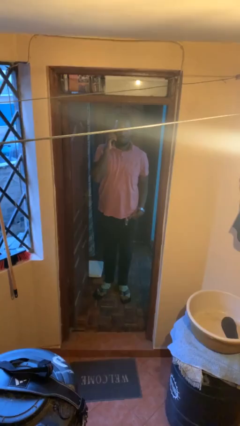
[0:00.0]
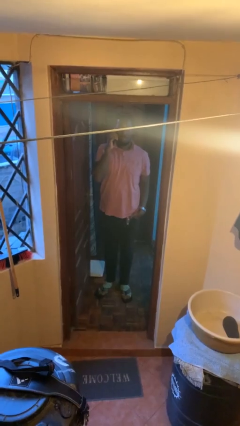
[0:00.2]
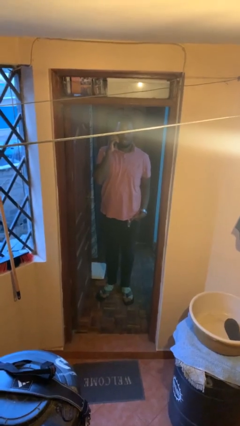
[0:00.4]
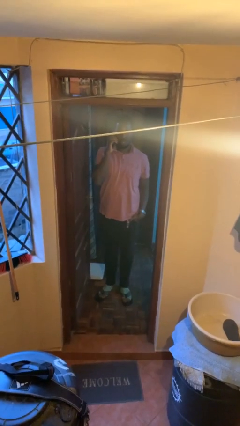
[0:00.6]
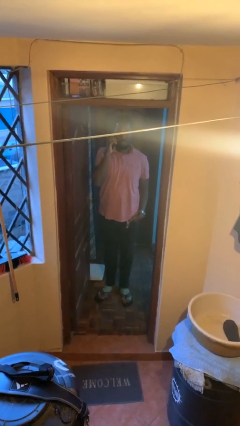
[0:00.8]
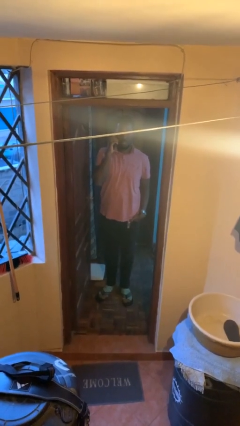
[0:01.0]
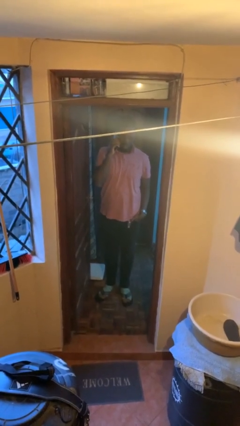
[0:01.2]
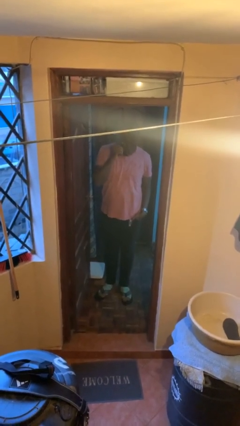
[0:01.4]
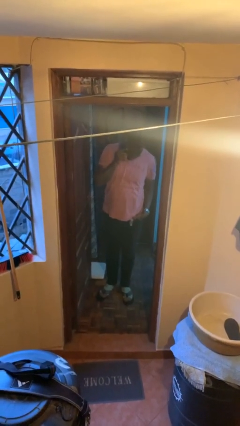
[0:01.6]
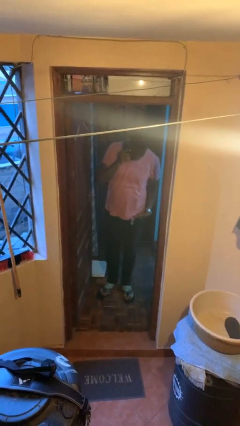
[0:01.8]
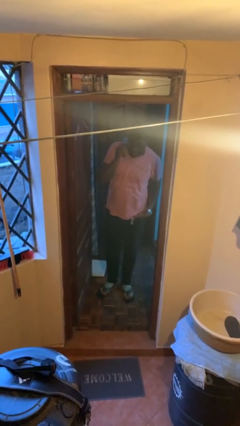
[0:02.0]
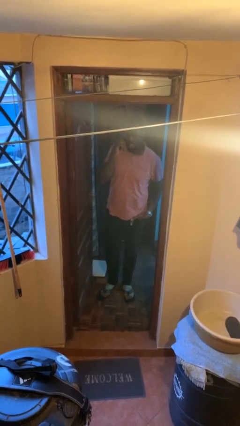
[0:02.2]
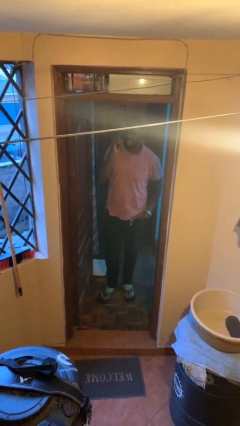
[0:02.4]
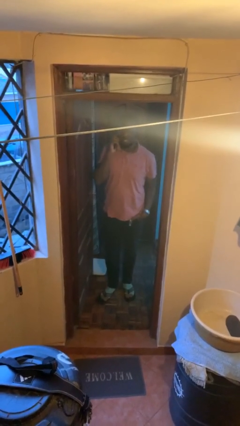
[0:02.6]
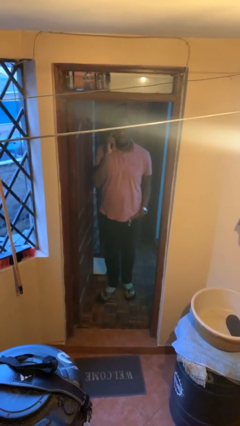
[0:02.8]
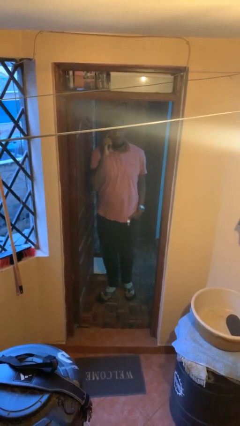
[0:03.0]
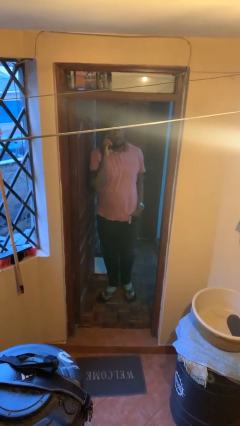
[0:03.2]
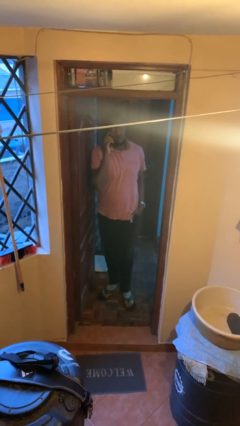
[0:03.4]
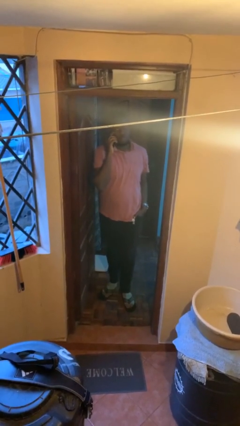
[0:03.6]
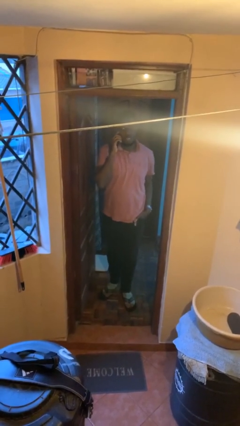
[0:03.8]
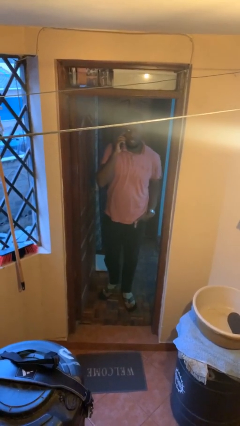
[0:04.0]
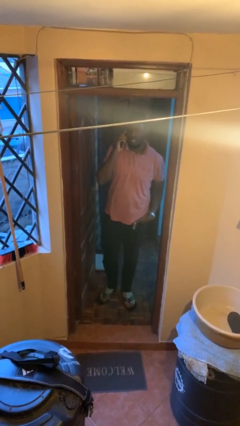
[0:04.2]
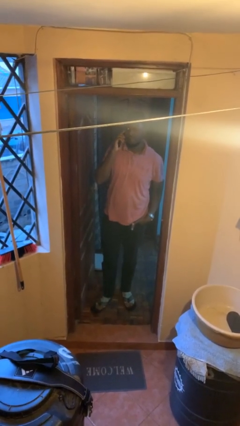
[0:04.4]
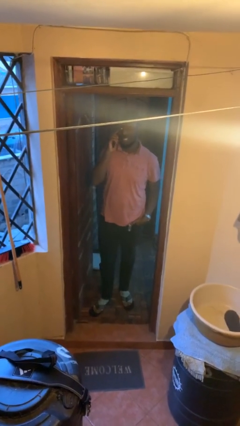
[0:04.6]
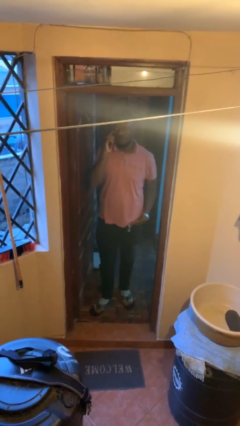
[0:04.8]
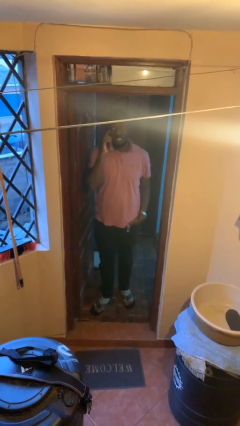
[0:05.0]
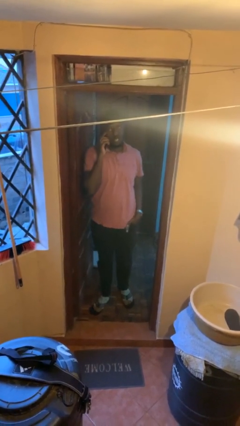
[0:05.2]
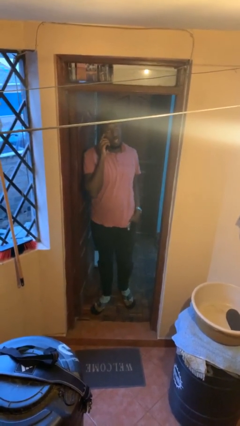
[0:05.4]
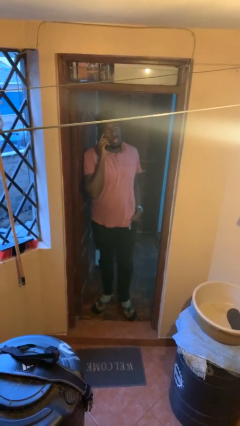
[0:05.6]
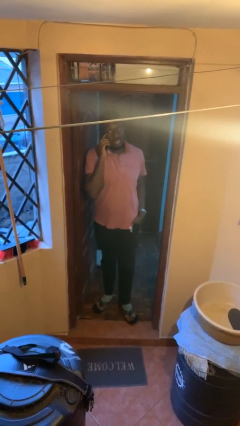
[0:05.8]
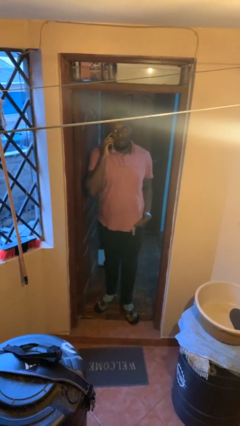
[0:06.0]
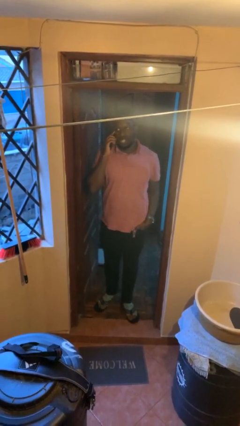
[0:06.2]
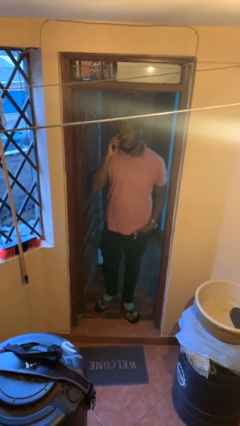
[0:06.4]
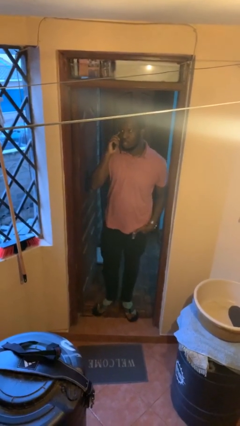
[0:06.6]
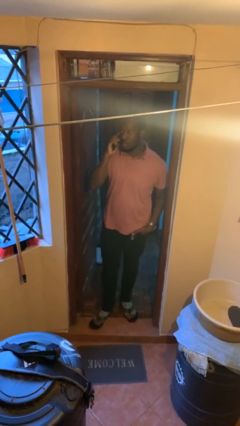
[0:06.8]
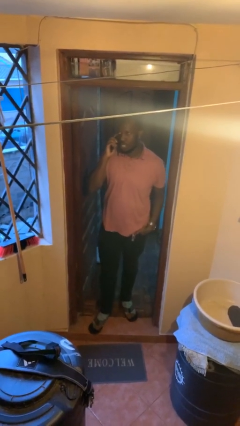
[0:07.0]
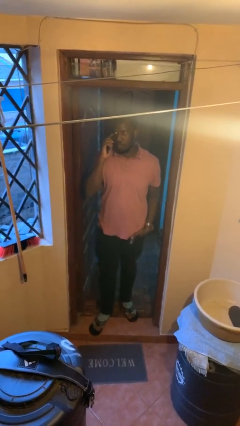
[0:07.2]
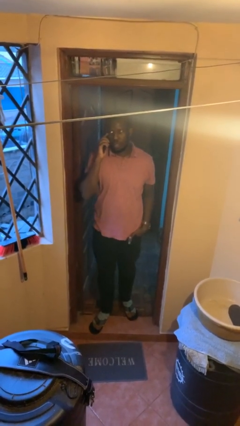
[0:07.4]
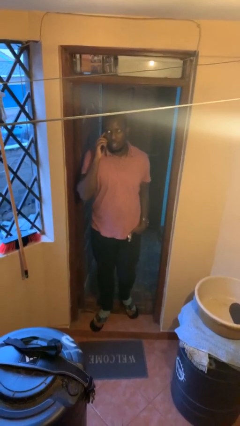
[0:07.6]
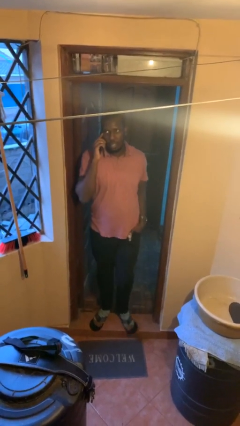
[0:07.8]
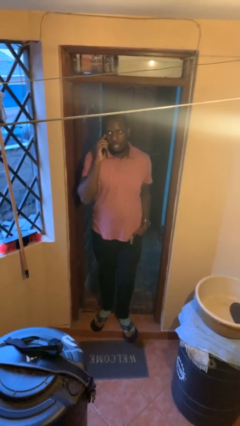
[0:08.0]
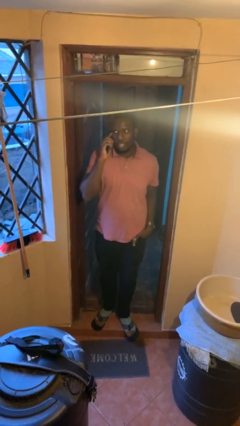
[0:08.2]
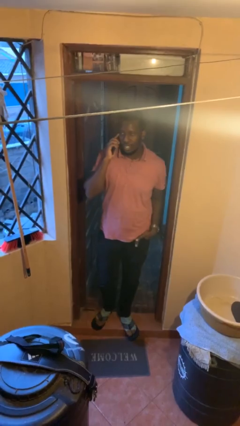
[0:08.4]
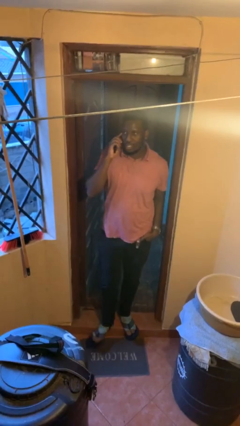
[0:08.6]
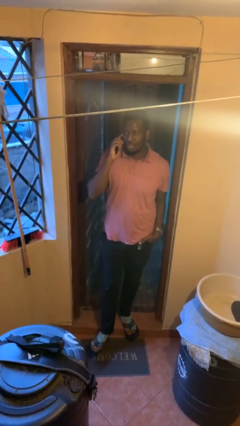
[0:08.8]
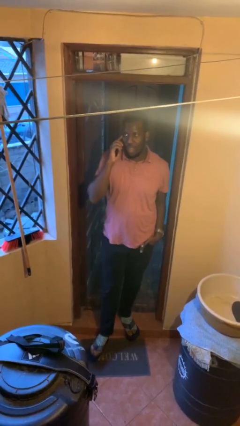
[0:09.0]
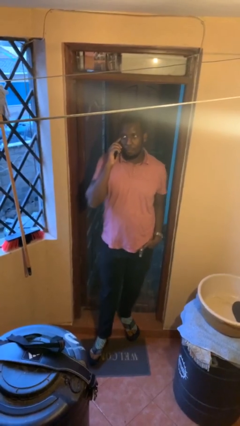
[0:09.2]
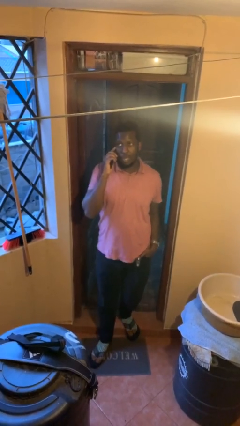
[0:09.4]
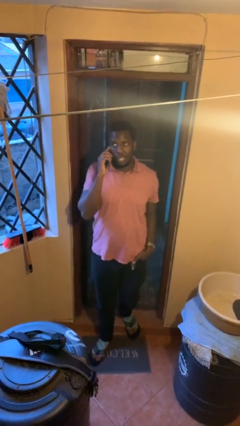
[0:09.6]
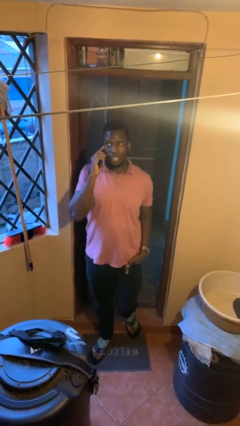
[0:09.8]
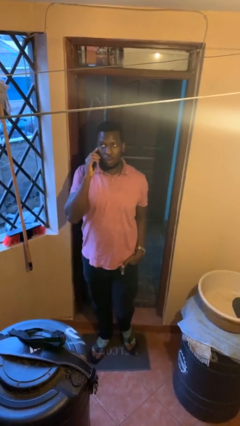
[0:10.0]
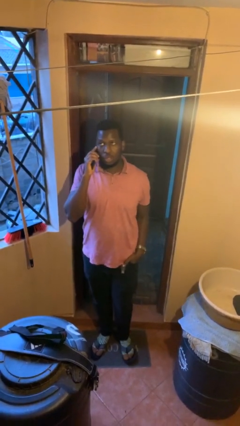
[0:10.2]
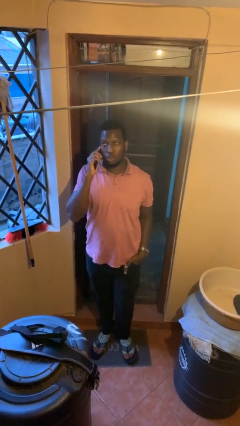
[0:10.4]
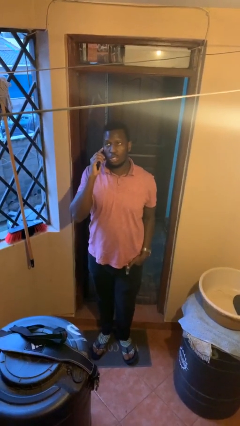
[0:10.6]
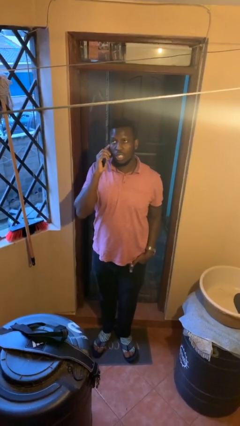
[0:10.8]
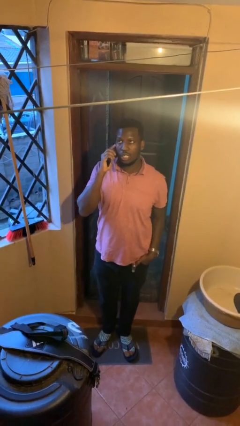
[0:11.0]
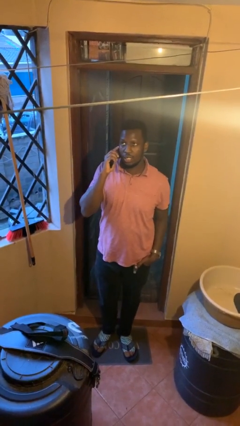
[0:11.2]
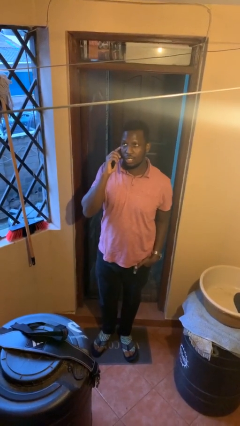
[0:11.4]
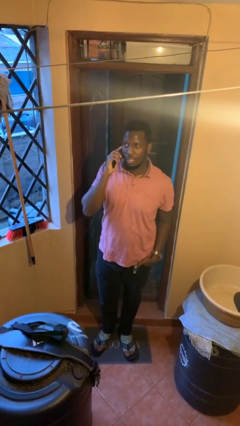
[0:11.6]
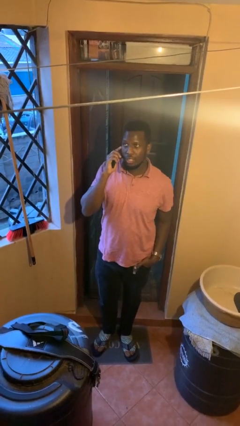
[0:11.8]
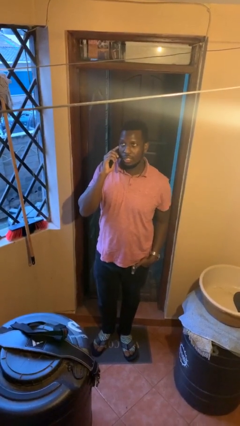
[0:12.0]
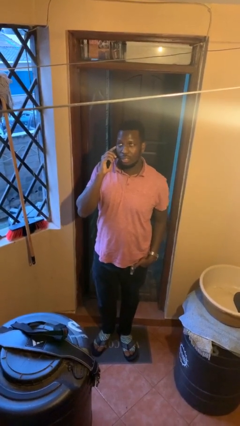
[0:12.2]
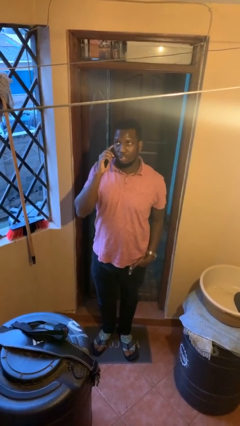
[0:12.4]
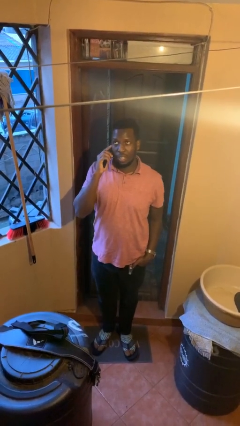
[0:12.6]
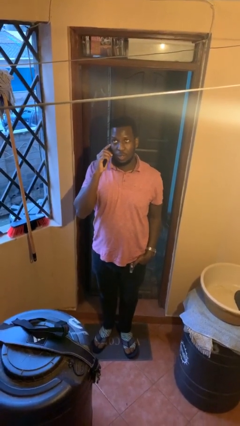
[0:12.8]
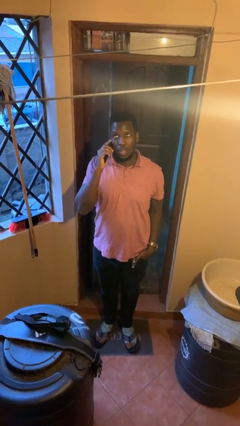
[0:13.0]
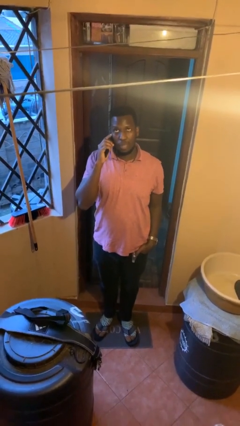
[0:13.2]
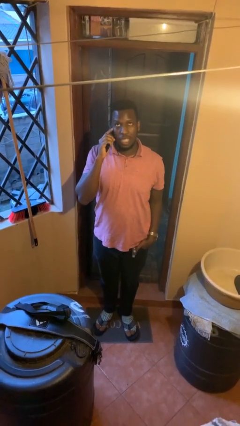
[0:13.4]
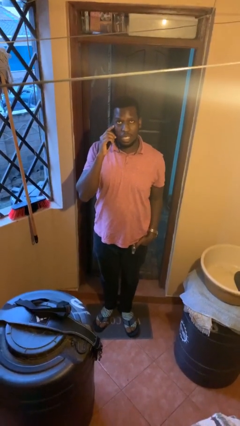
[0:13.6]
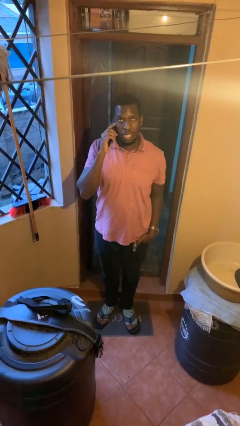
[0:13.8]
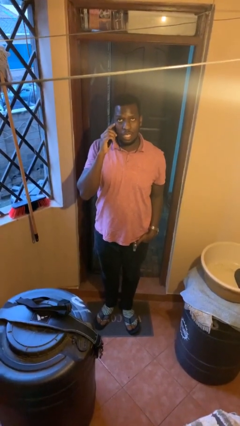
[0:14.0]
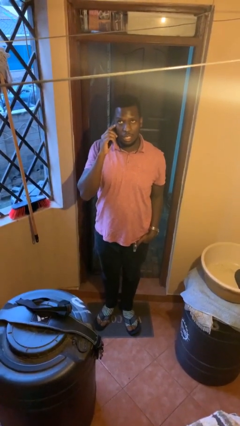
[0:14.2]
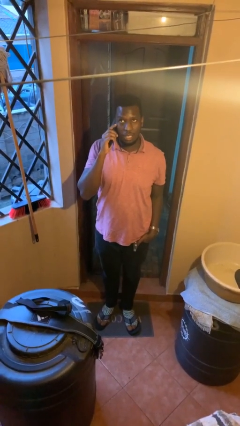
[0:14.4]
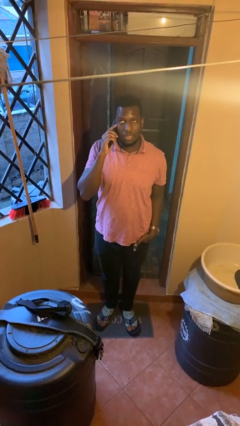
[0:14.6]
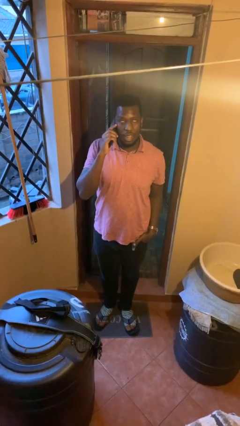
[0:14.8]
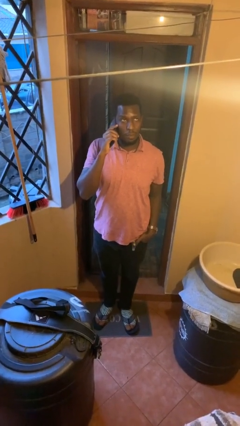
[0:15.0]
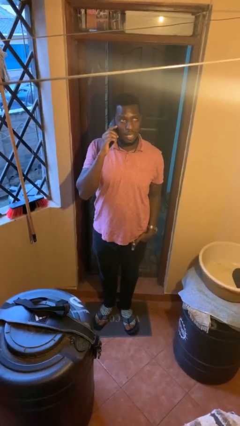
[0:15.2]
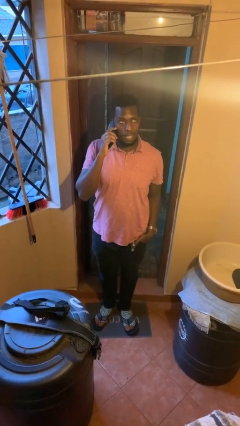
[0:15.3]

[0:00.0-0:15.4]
person enters scene through structure

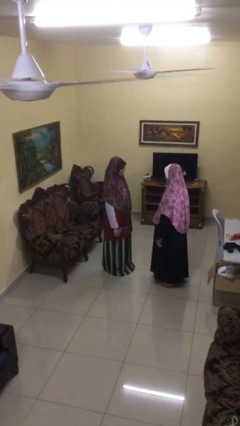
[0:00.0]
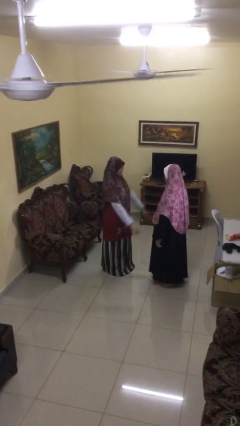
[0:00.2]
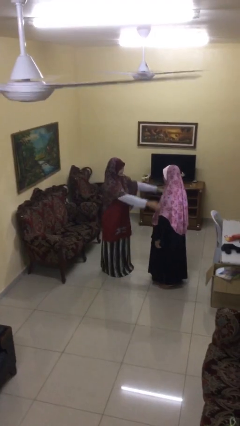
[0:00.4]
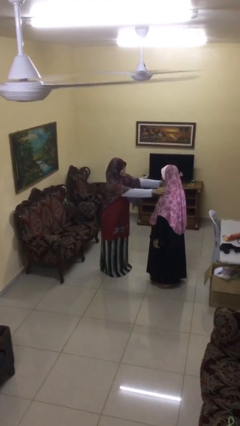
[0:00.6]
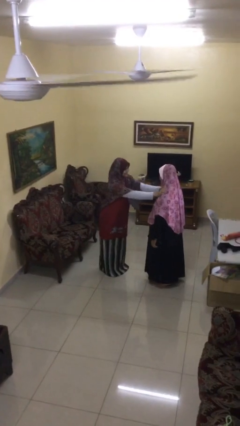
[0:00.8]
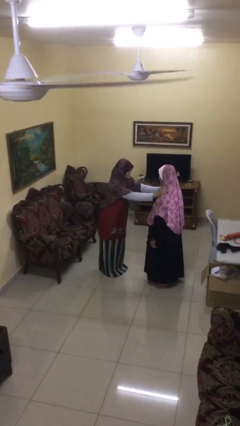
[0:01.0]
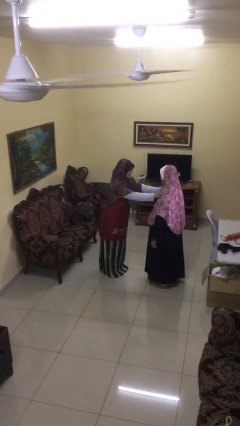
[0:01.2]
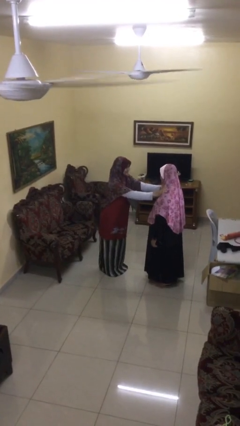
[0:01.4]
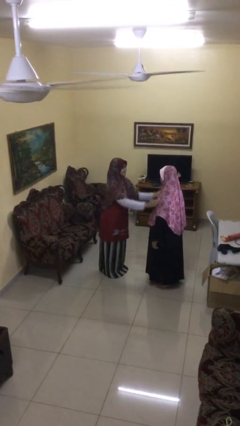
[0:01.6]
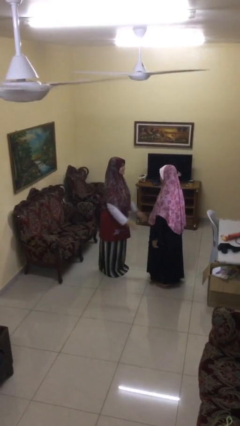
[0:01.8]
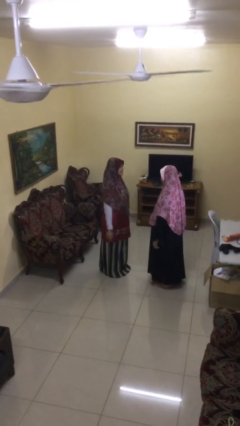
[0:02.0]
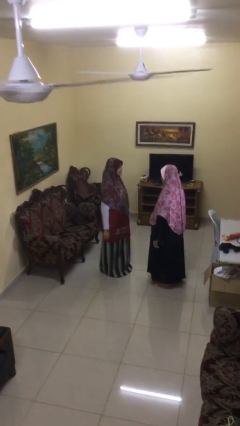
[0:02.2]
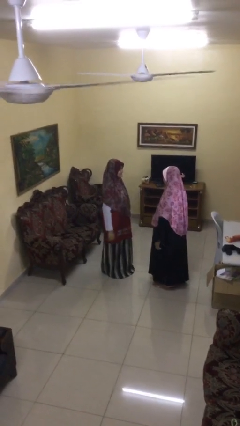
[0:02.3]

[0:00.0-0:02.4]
person pounds shoulders of person

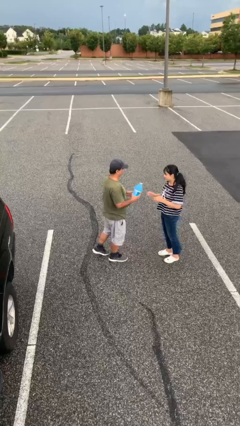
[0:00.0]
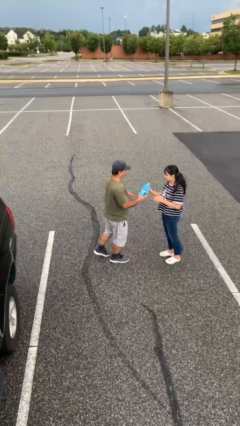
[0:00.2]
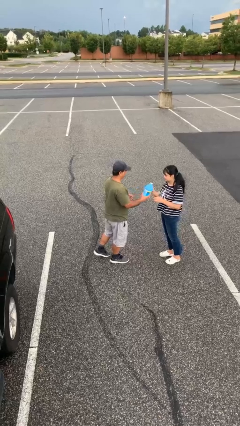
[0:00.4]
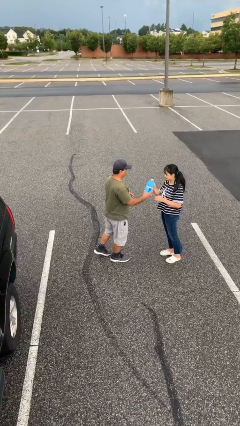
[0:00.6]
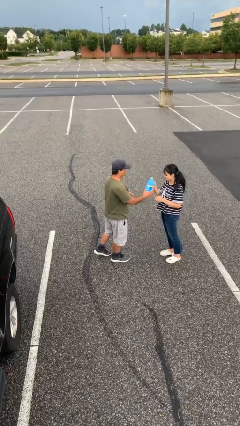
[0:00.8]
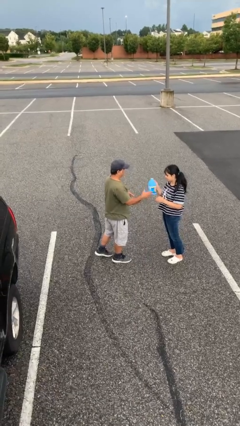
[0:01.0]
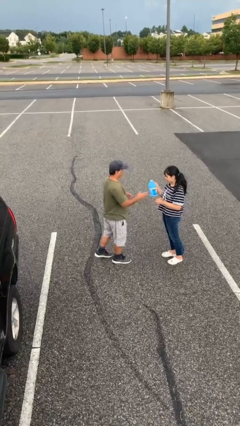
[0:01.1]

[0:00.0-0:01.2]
person transfers object to person
